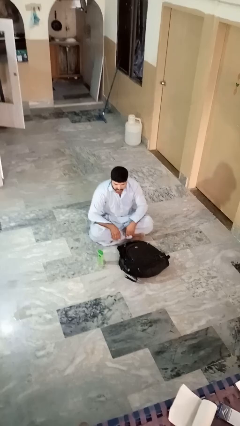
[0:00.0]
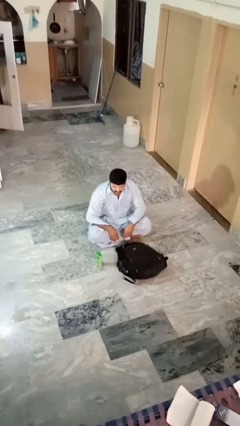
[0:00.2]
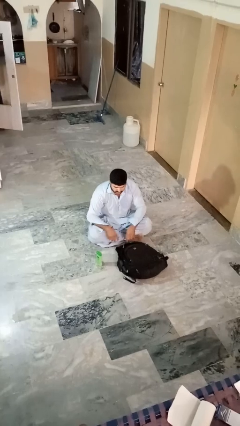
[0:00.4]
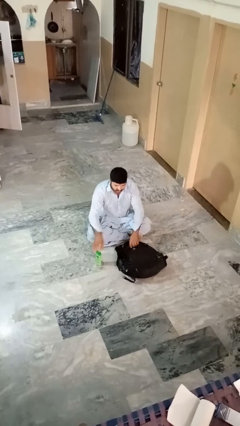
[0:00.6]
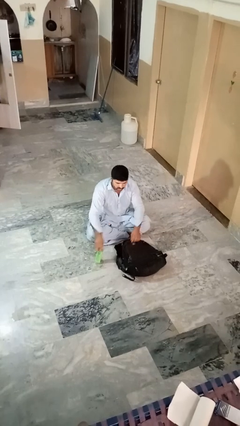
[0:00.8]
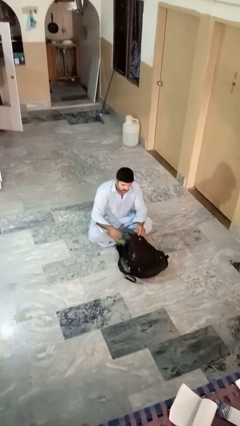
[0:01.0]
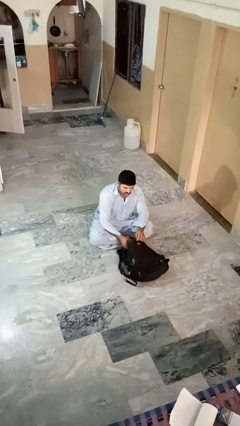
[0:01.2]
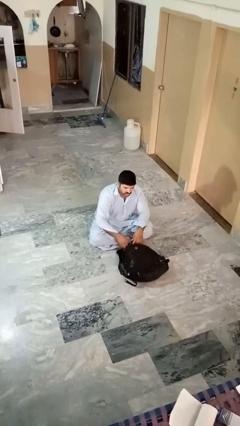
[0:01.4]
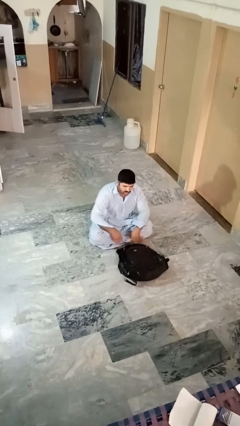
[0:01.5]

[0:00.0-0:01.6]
person puts object into bag

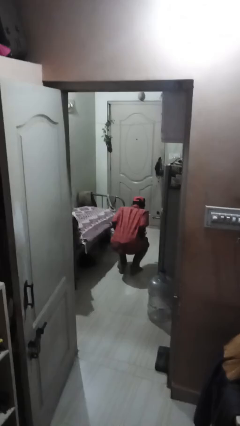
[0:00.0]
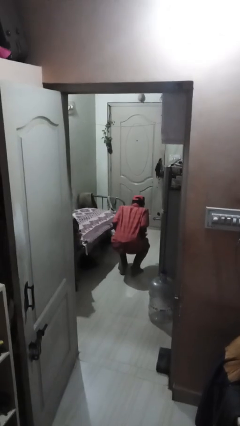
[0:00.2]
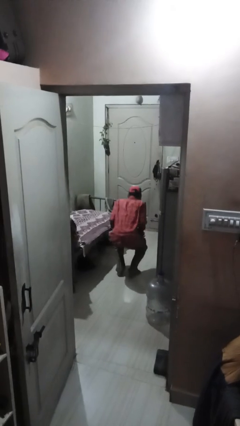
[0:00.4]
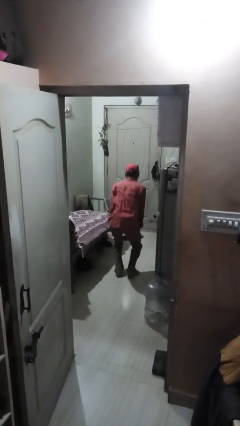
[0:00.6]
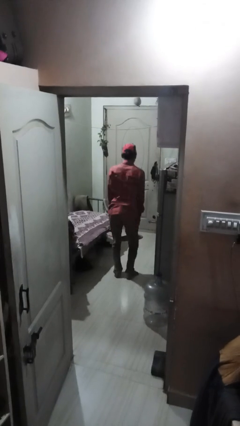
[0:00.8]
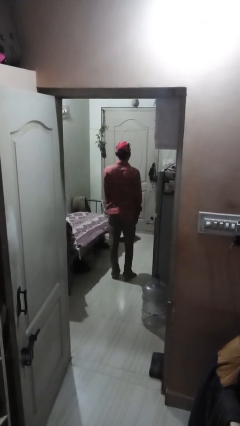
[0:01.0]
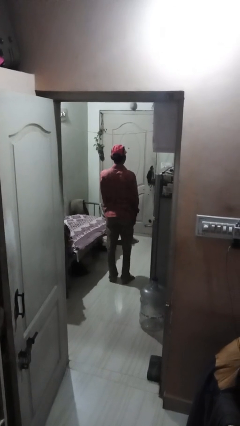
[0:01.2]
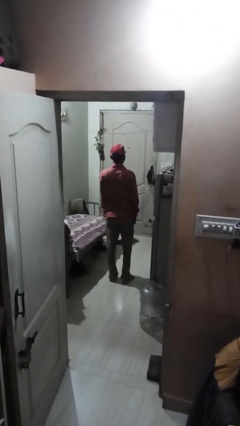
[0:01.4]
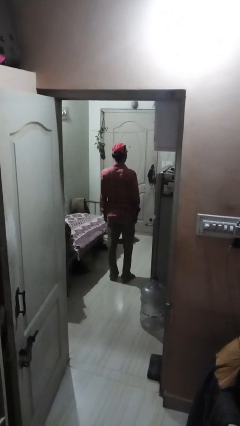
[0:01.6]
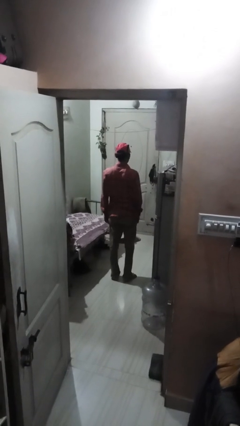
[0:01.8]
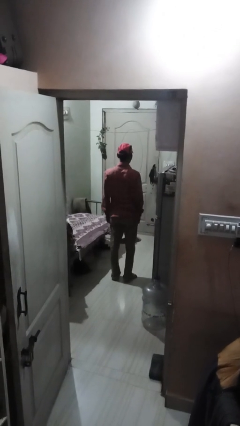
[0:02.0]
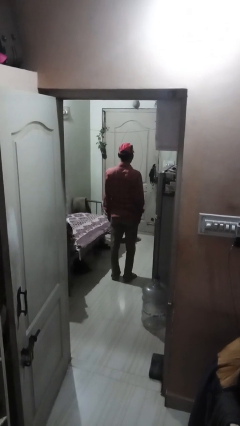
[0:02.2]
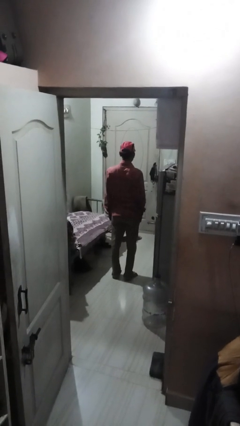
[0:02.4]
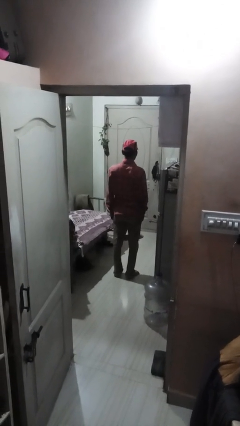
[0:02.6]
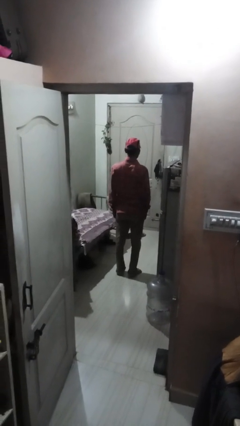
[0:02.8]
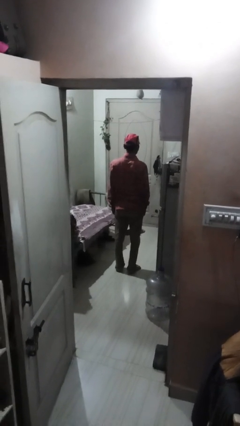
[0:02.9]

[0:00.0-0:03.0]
person stands up

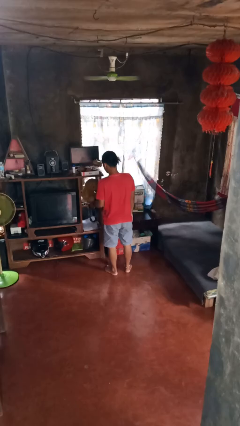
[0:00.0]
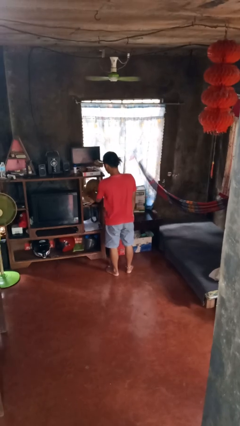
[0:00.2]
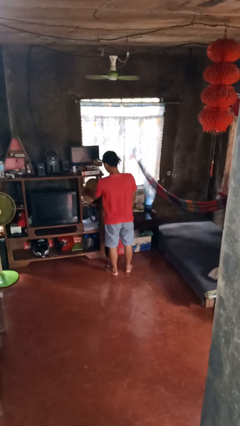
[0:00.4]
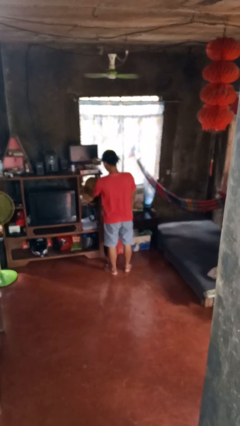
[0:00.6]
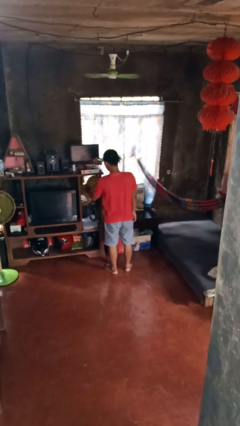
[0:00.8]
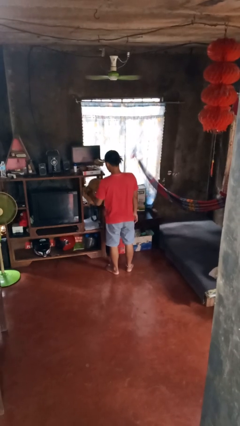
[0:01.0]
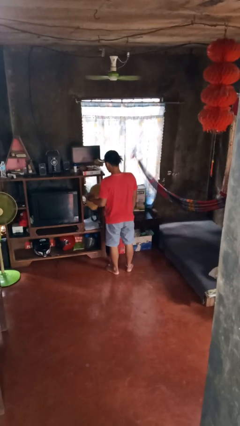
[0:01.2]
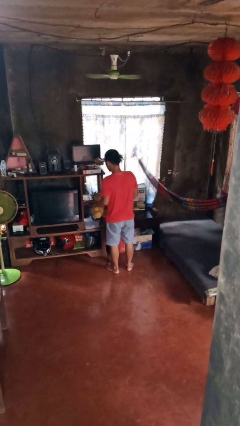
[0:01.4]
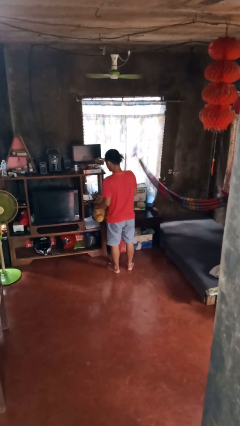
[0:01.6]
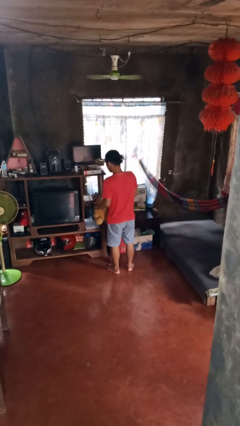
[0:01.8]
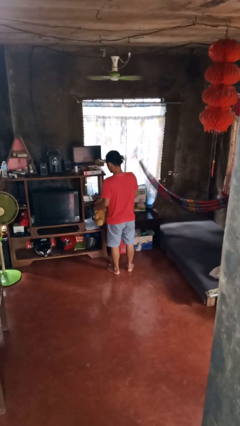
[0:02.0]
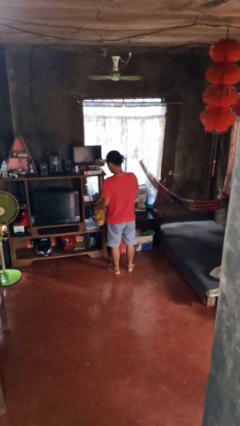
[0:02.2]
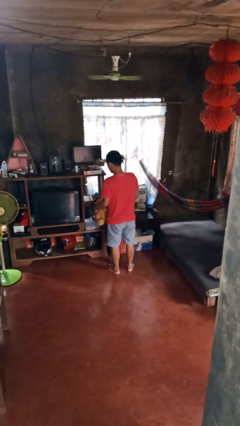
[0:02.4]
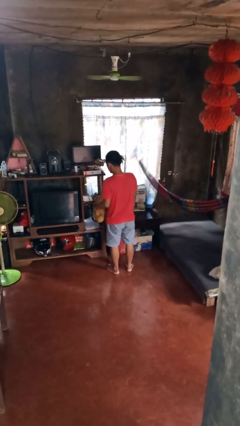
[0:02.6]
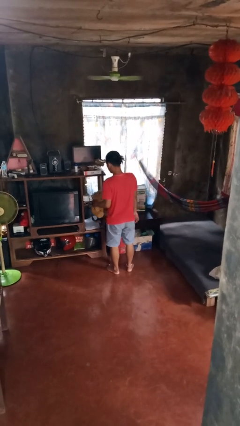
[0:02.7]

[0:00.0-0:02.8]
person picks up object from cabinet

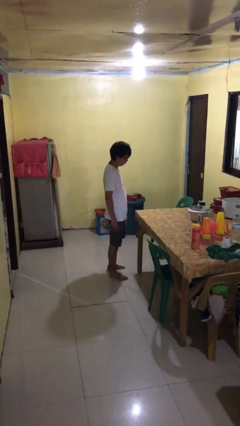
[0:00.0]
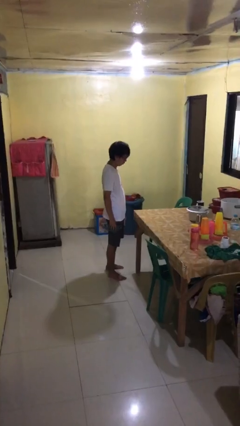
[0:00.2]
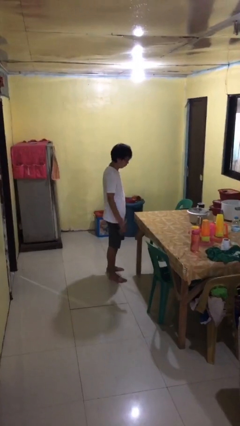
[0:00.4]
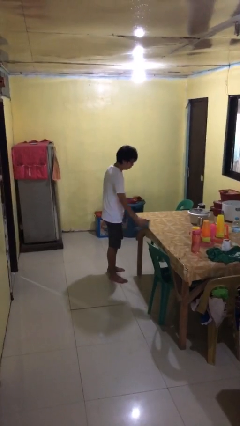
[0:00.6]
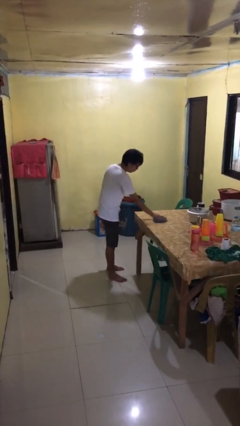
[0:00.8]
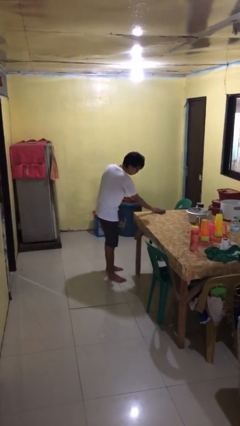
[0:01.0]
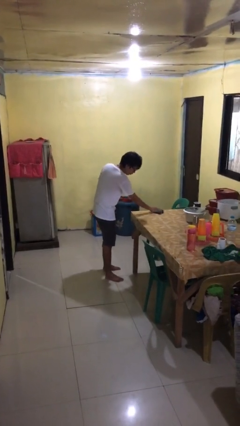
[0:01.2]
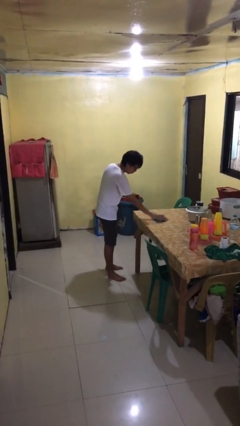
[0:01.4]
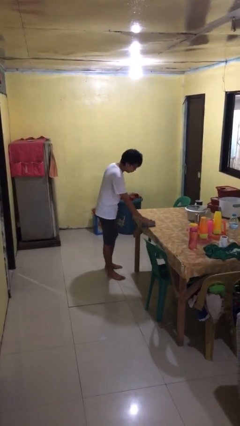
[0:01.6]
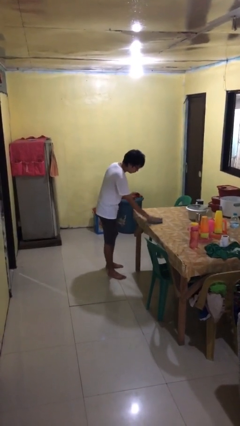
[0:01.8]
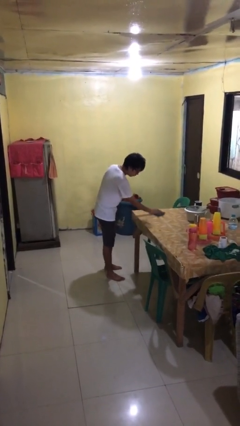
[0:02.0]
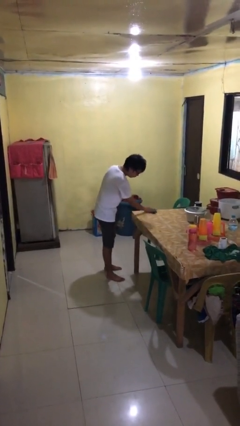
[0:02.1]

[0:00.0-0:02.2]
person cleans table with rag

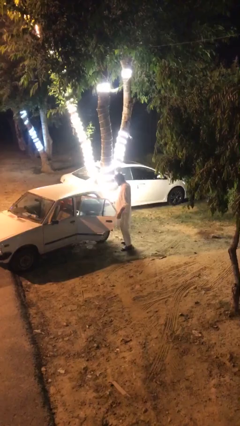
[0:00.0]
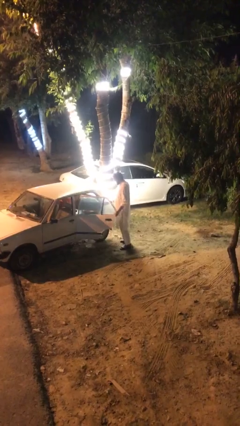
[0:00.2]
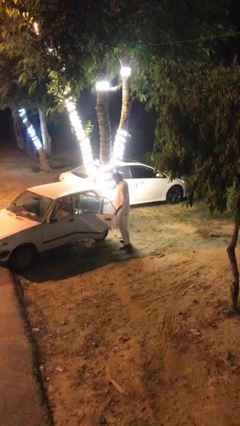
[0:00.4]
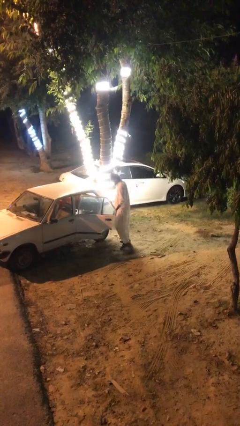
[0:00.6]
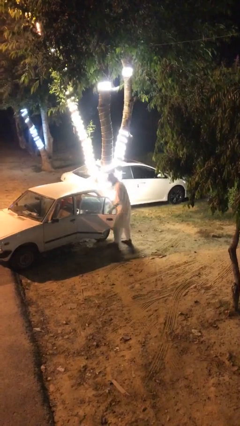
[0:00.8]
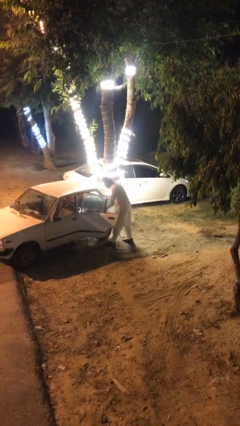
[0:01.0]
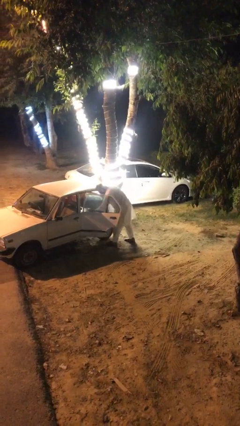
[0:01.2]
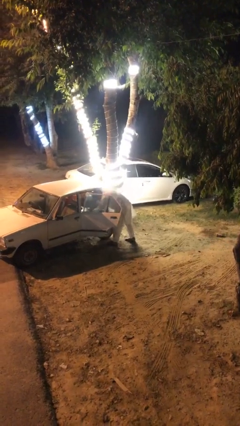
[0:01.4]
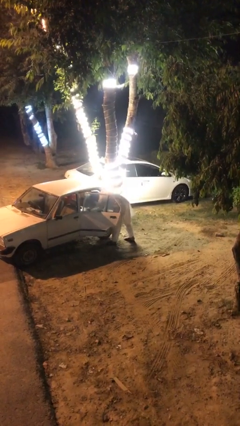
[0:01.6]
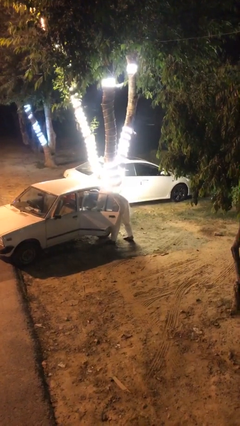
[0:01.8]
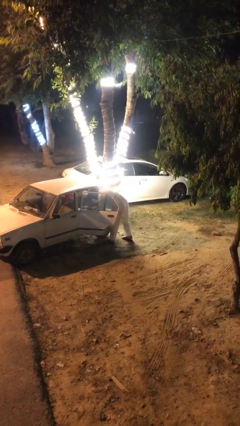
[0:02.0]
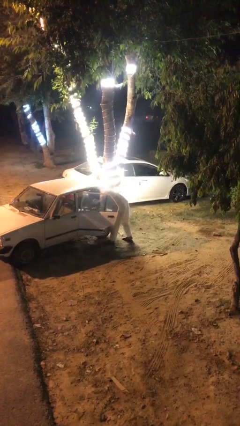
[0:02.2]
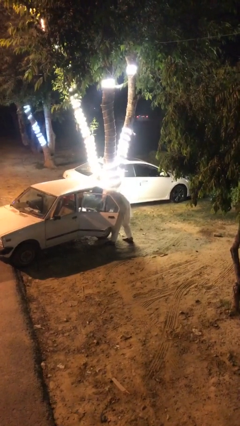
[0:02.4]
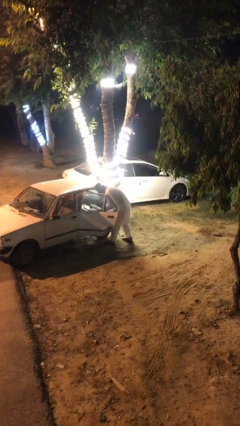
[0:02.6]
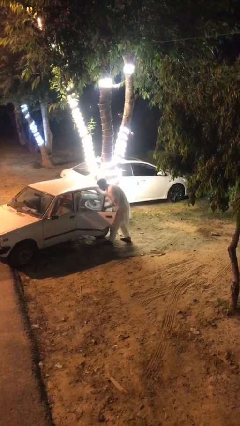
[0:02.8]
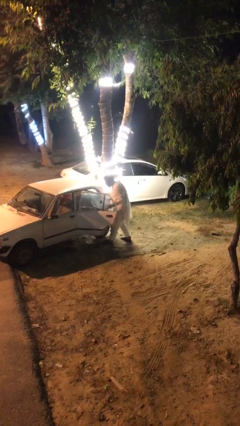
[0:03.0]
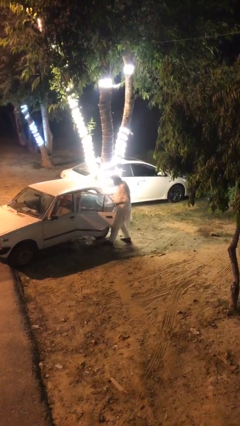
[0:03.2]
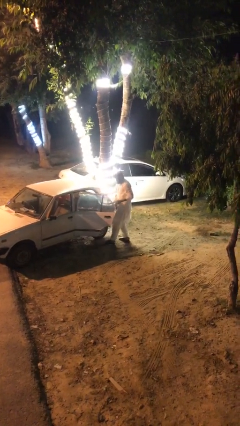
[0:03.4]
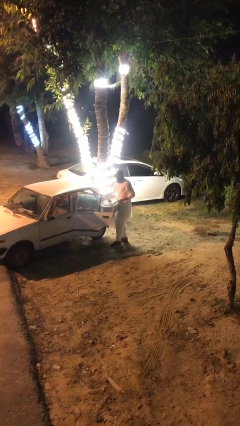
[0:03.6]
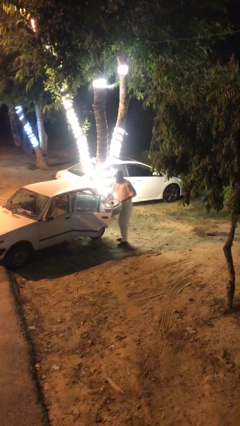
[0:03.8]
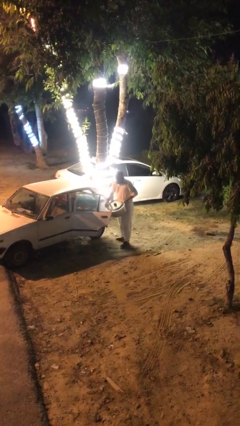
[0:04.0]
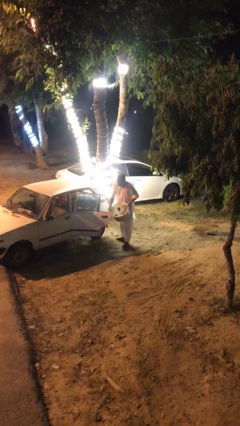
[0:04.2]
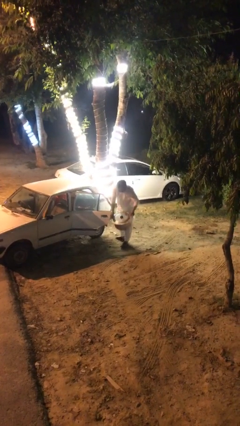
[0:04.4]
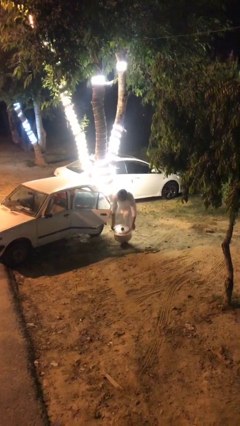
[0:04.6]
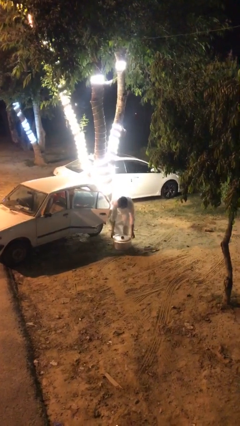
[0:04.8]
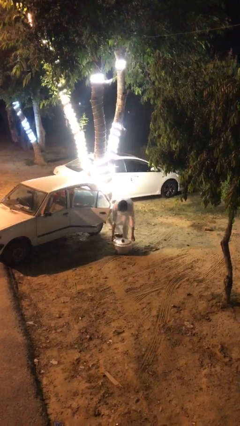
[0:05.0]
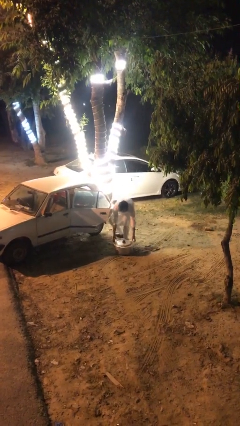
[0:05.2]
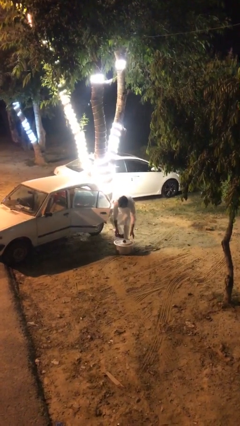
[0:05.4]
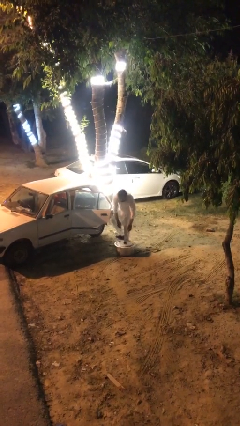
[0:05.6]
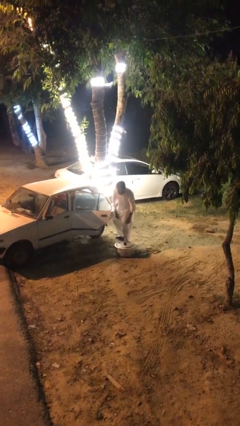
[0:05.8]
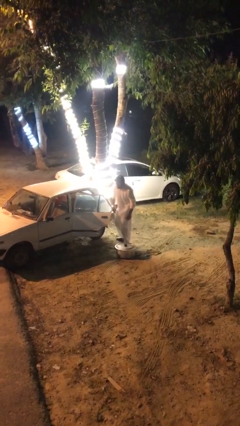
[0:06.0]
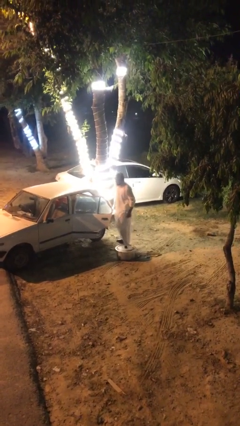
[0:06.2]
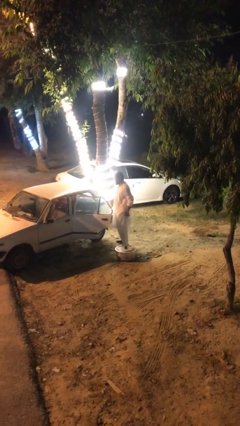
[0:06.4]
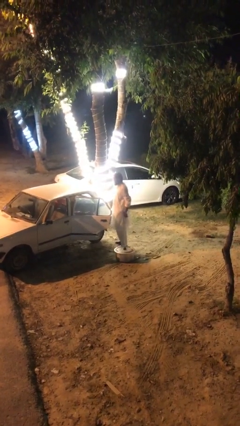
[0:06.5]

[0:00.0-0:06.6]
person unloads car

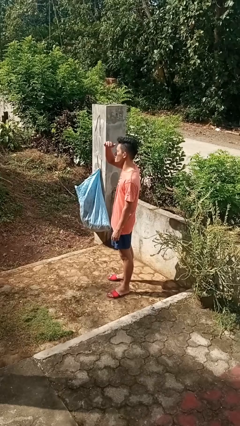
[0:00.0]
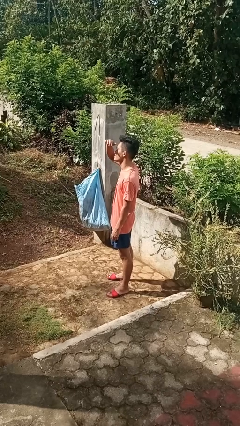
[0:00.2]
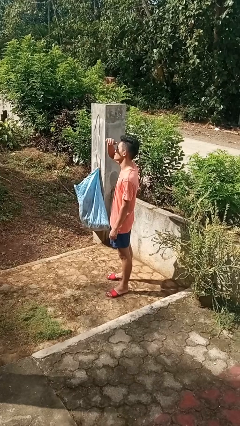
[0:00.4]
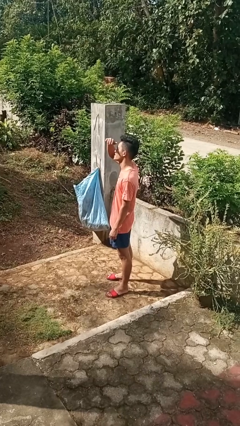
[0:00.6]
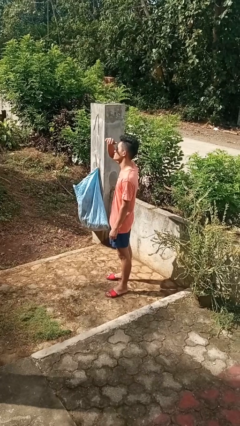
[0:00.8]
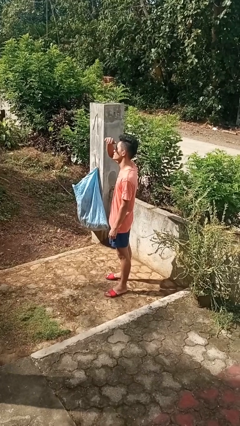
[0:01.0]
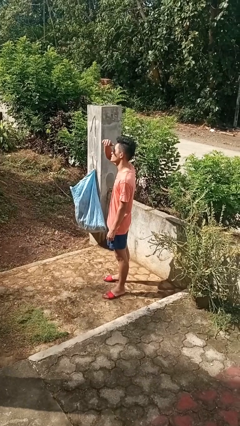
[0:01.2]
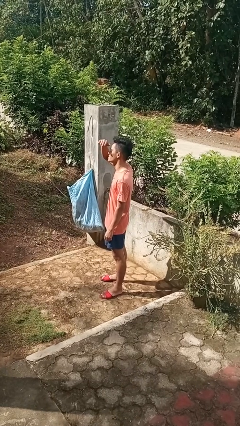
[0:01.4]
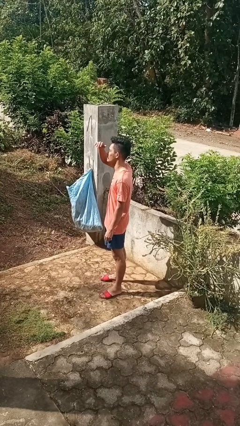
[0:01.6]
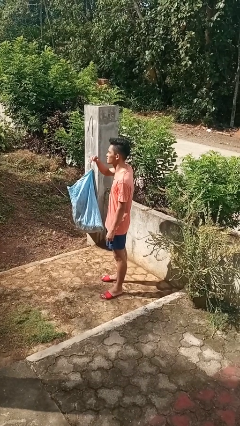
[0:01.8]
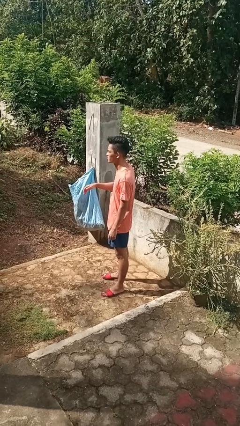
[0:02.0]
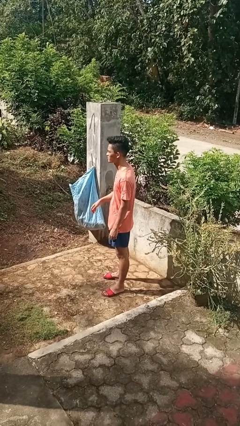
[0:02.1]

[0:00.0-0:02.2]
person shades eyes
